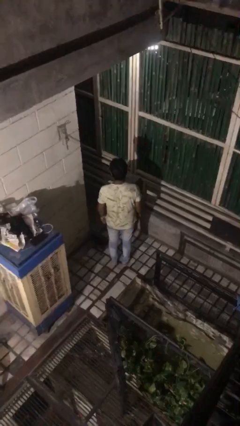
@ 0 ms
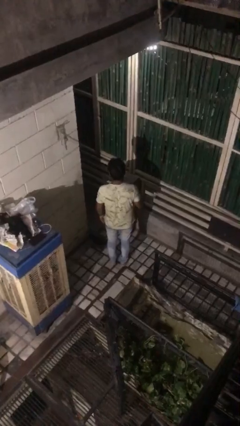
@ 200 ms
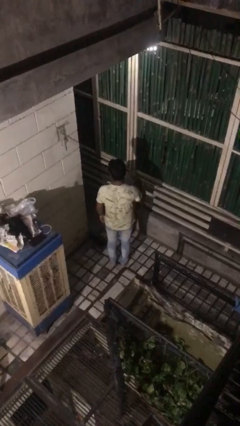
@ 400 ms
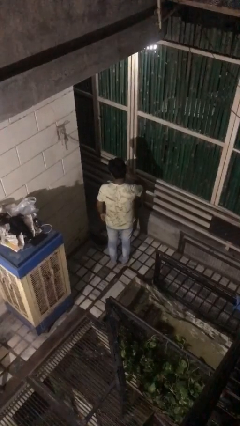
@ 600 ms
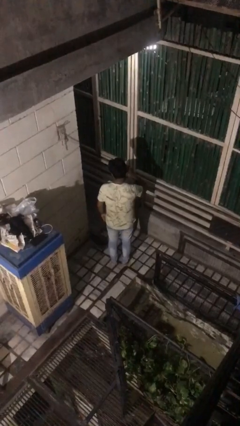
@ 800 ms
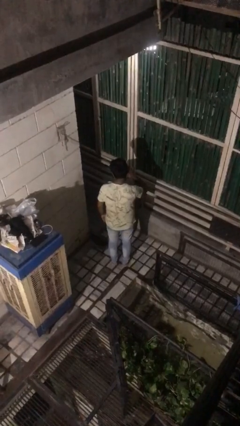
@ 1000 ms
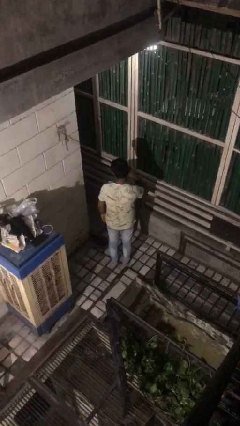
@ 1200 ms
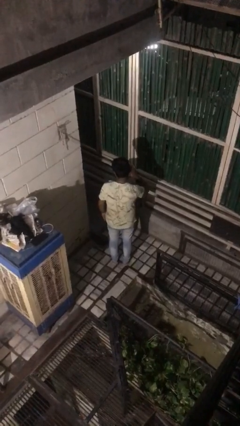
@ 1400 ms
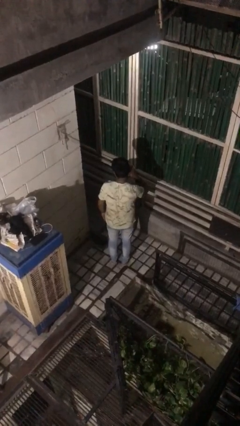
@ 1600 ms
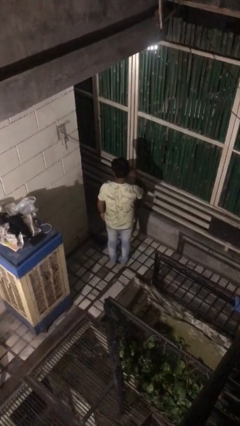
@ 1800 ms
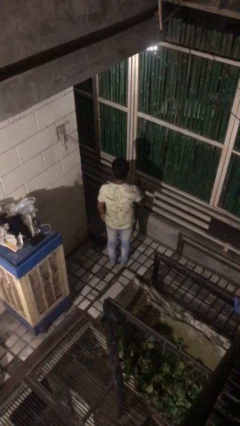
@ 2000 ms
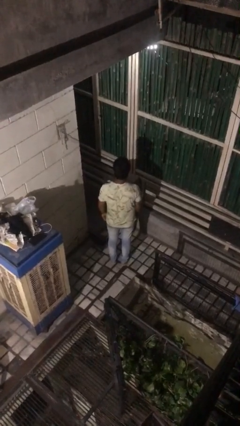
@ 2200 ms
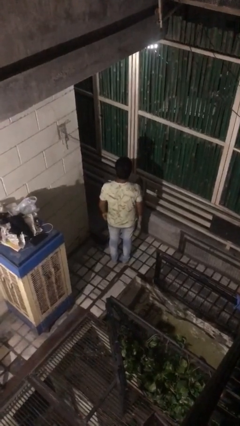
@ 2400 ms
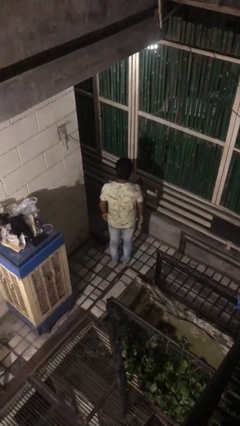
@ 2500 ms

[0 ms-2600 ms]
person gestures listen closely

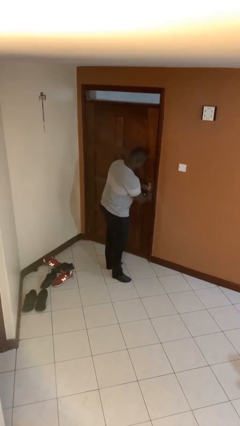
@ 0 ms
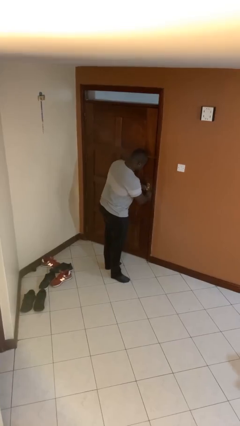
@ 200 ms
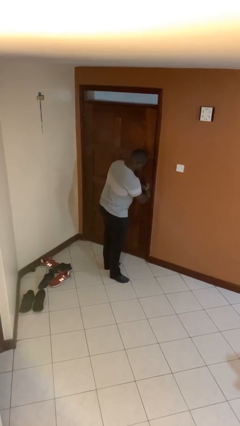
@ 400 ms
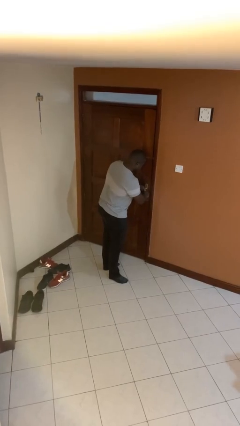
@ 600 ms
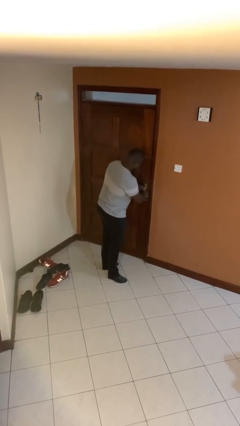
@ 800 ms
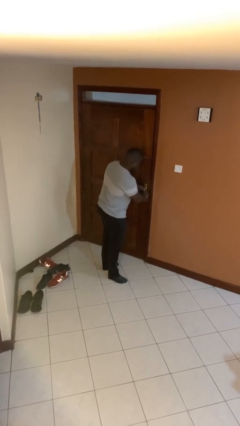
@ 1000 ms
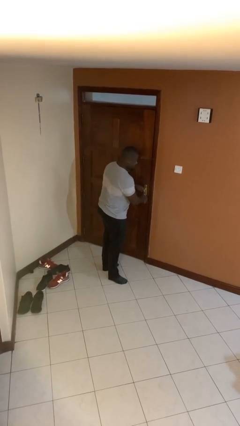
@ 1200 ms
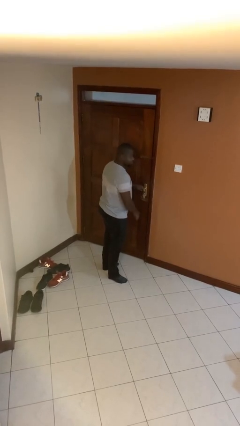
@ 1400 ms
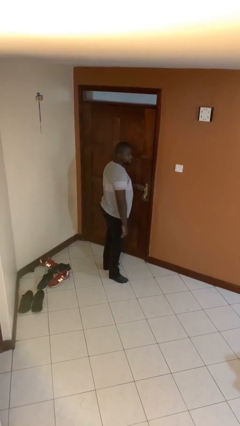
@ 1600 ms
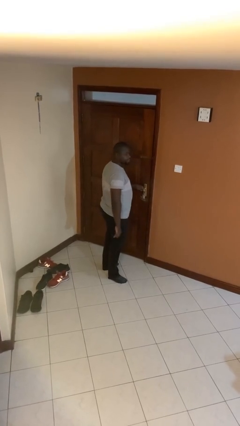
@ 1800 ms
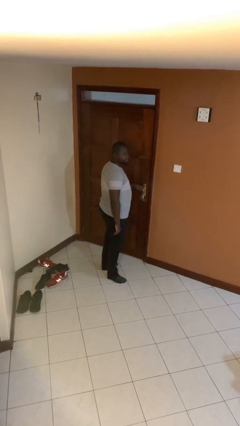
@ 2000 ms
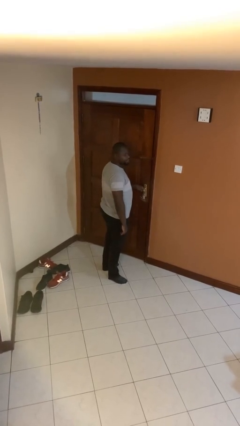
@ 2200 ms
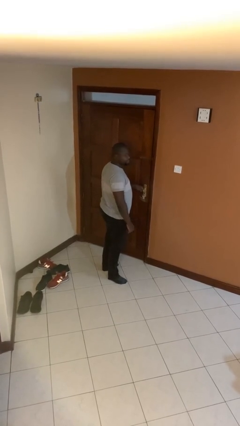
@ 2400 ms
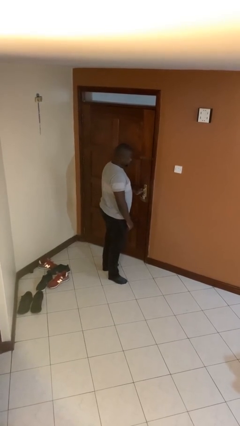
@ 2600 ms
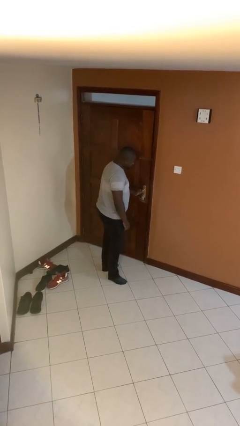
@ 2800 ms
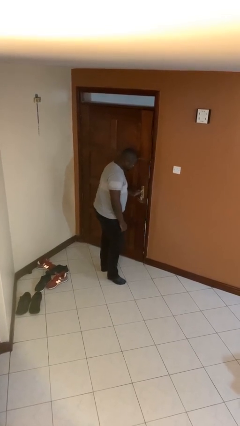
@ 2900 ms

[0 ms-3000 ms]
person unlocks door with keys

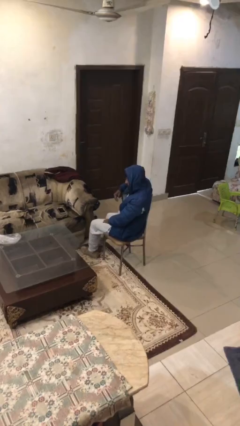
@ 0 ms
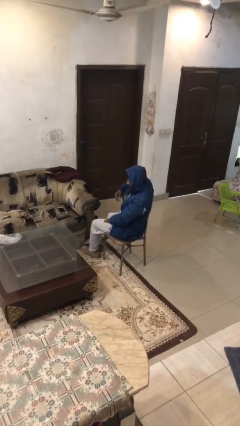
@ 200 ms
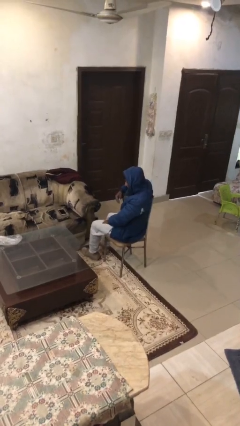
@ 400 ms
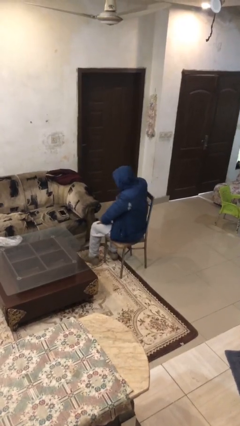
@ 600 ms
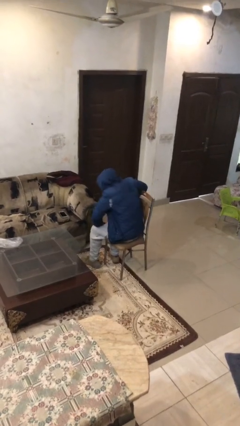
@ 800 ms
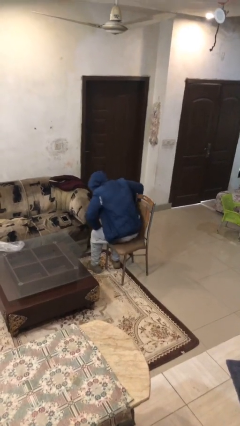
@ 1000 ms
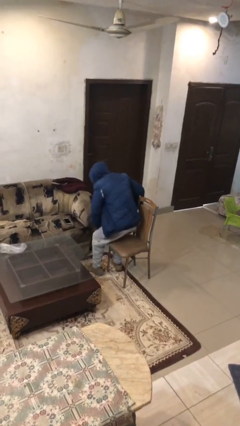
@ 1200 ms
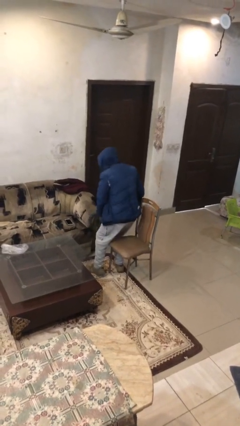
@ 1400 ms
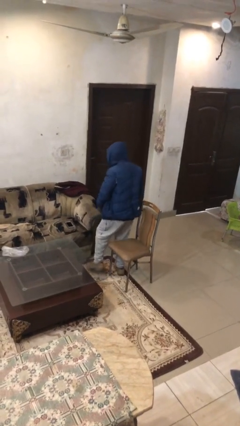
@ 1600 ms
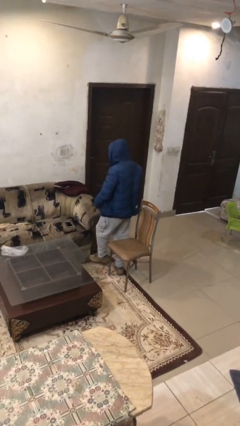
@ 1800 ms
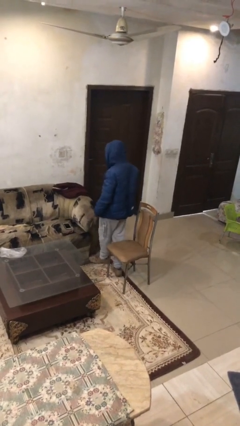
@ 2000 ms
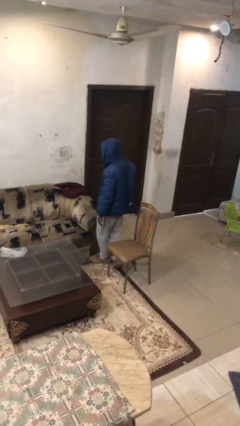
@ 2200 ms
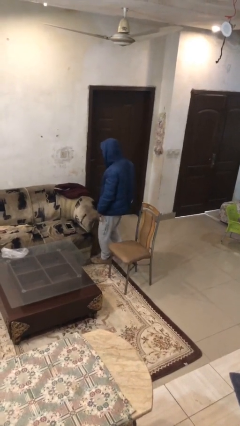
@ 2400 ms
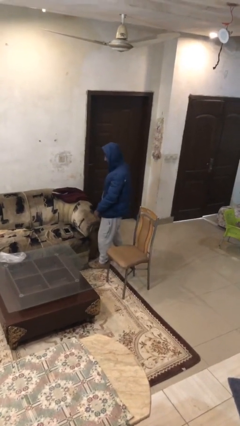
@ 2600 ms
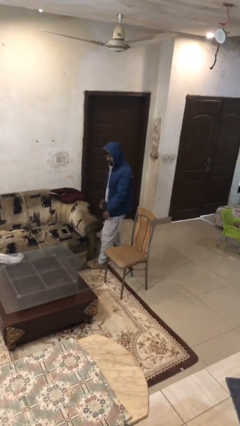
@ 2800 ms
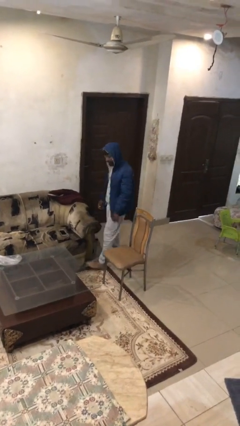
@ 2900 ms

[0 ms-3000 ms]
person stands up

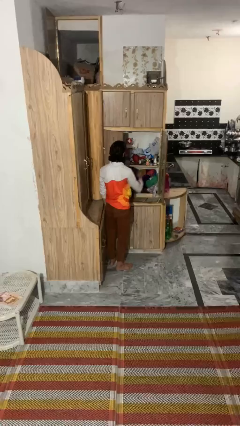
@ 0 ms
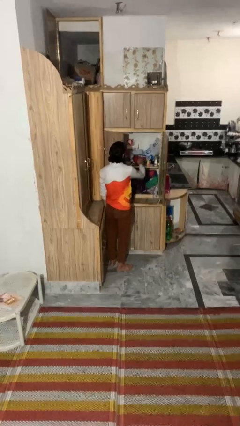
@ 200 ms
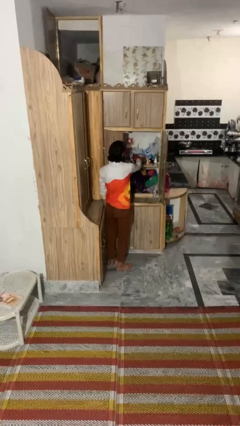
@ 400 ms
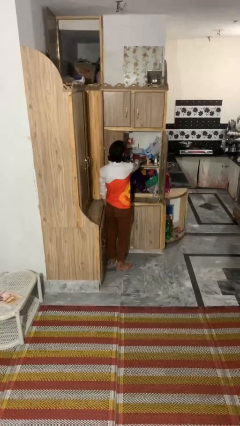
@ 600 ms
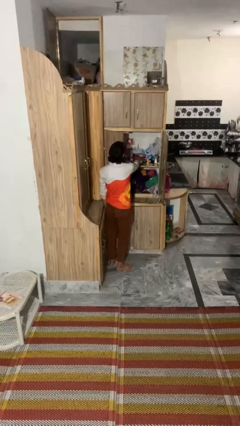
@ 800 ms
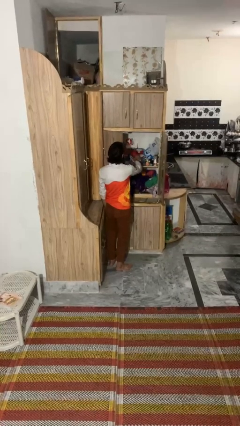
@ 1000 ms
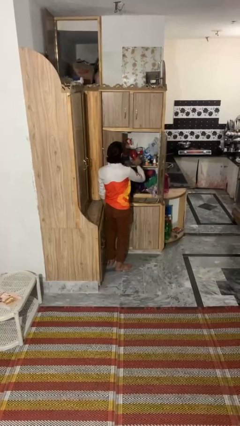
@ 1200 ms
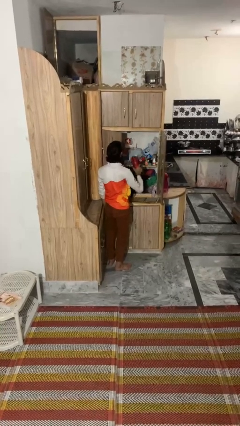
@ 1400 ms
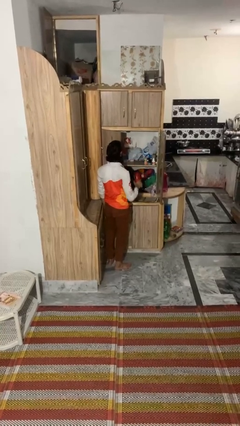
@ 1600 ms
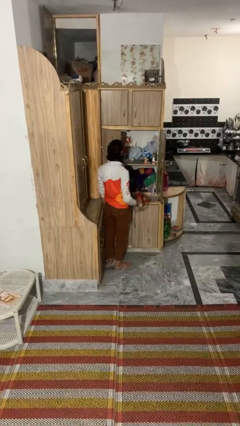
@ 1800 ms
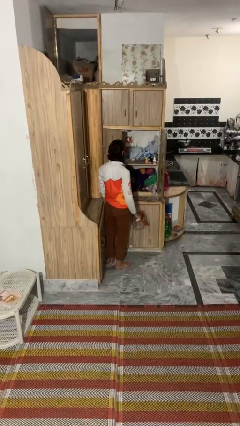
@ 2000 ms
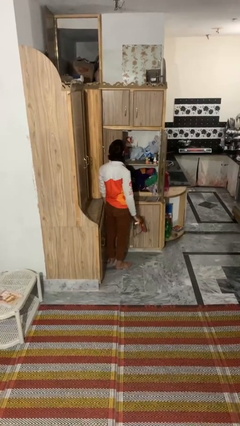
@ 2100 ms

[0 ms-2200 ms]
person picks up object from cabinet

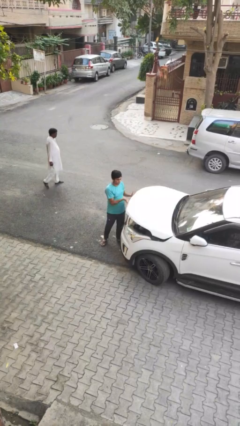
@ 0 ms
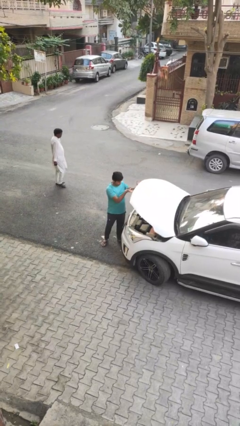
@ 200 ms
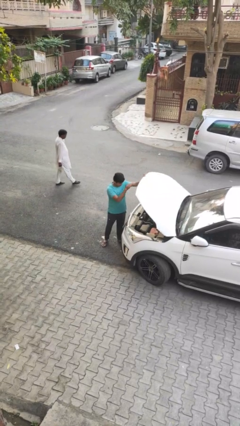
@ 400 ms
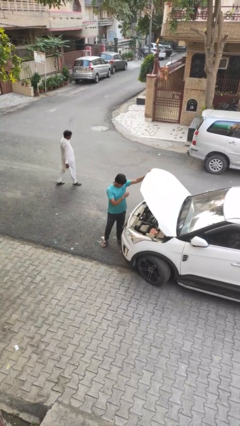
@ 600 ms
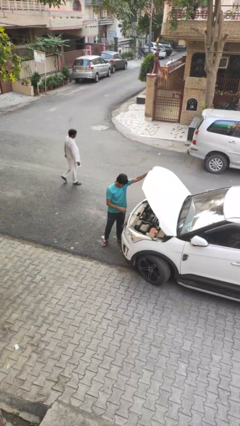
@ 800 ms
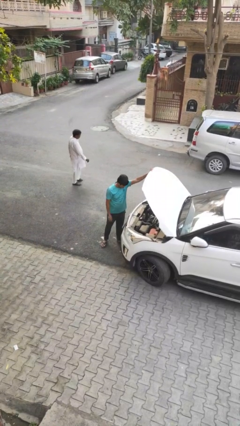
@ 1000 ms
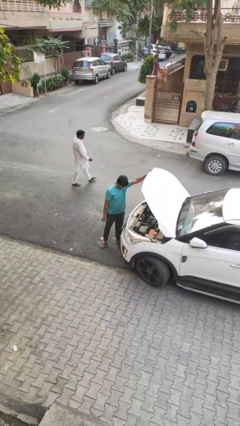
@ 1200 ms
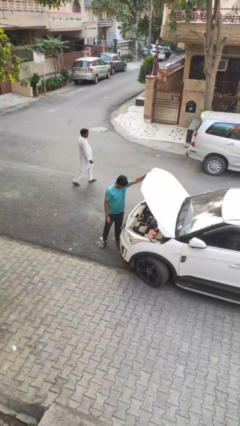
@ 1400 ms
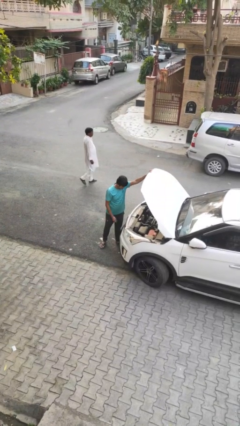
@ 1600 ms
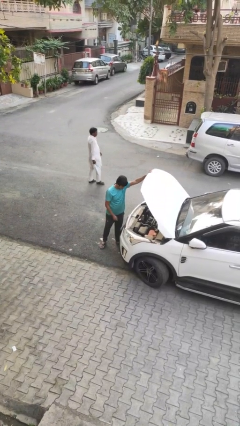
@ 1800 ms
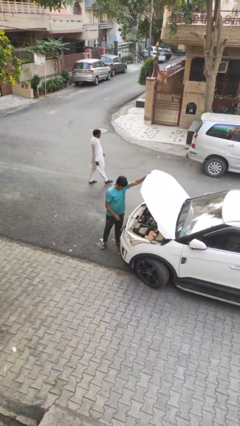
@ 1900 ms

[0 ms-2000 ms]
person opens car hood

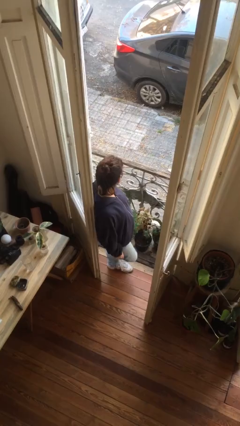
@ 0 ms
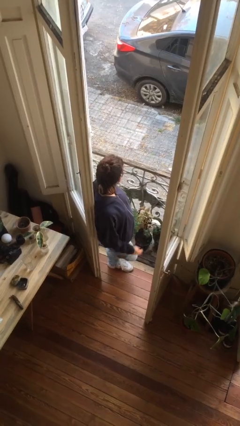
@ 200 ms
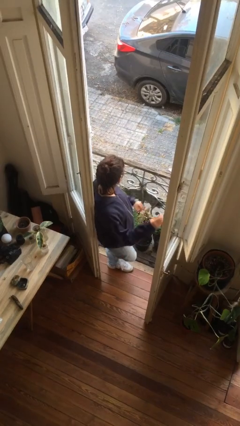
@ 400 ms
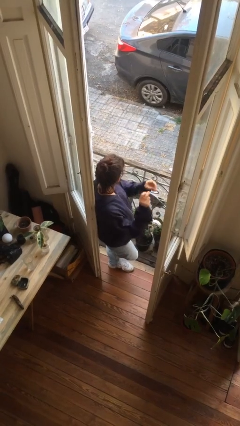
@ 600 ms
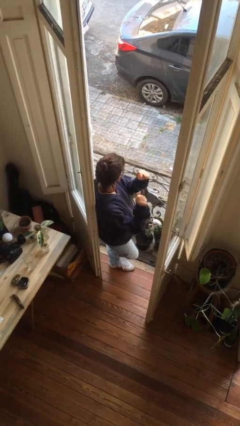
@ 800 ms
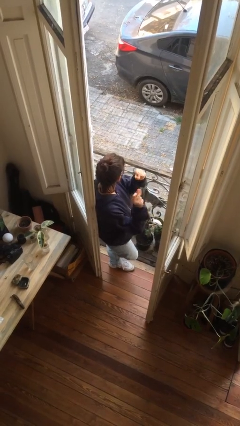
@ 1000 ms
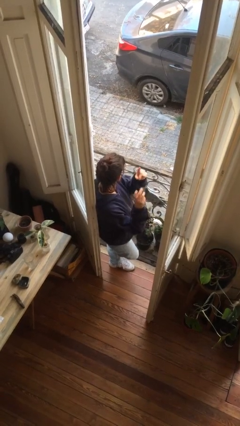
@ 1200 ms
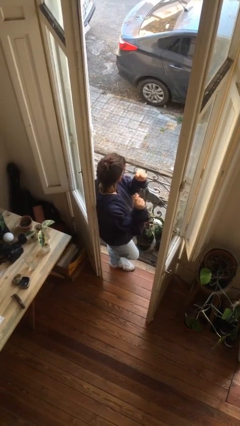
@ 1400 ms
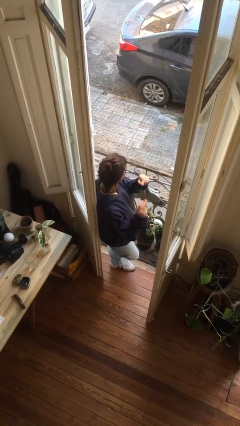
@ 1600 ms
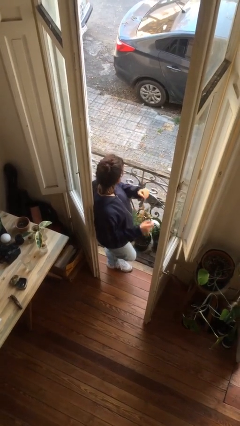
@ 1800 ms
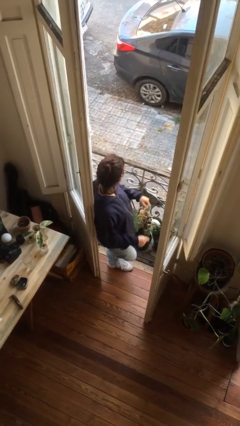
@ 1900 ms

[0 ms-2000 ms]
person snaps fingers

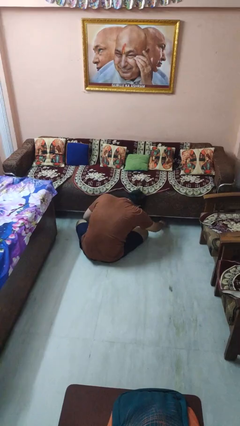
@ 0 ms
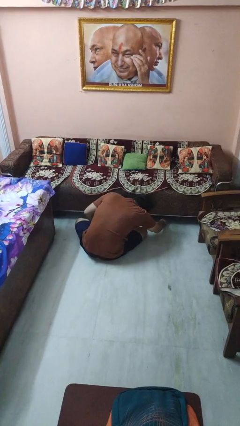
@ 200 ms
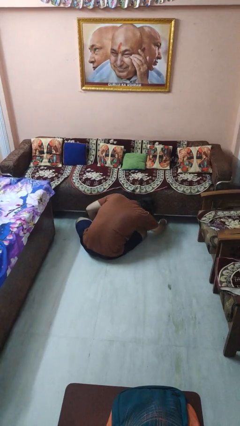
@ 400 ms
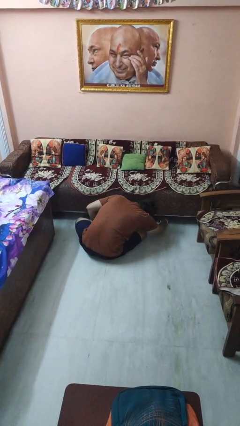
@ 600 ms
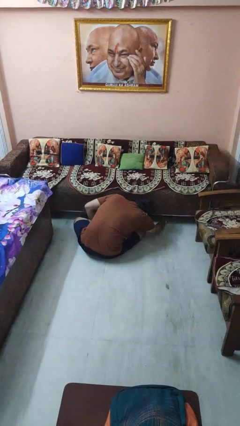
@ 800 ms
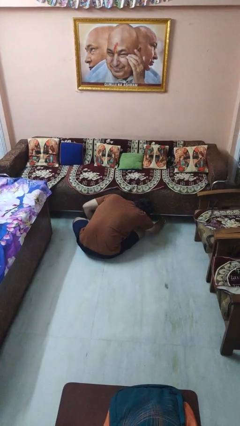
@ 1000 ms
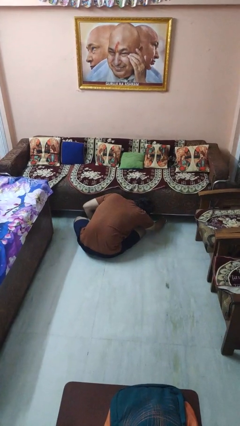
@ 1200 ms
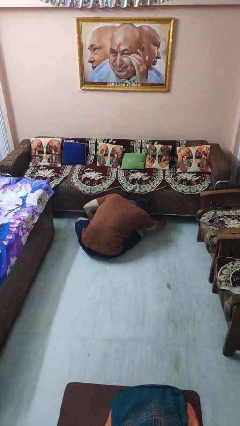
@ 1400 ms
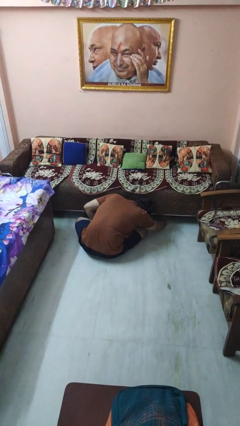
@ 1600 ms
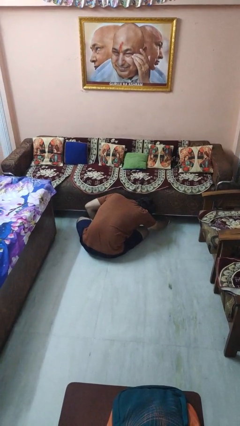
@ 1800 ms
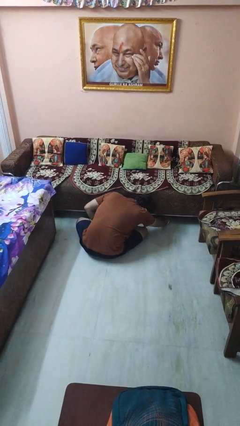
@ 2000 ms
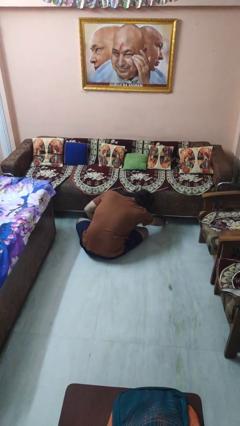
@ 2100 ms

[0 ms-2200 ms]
person searches under couch
